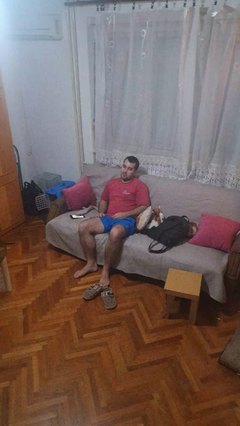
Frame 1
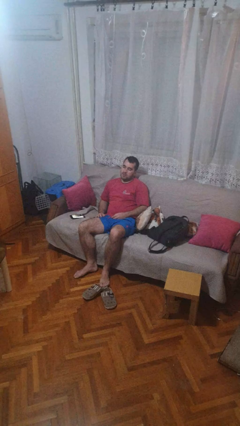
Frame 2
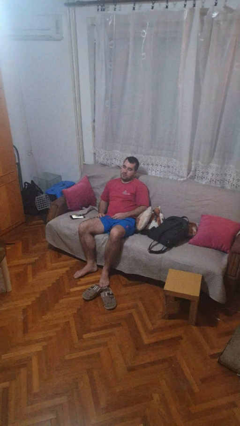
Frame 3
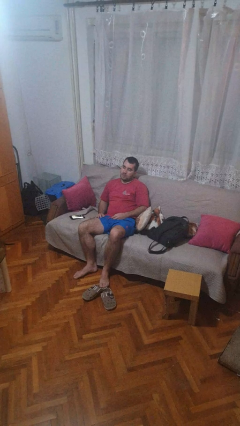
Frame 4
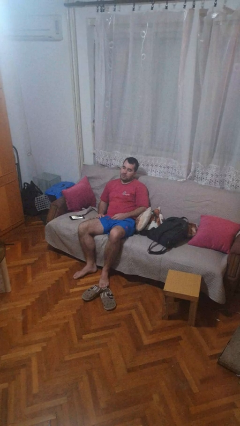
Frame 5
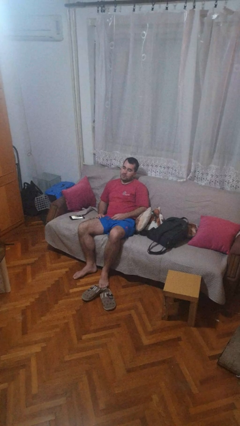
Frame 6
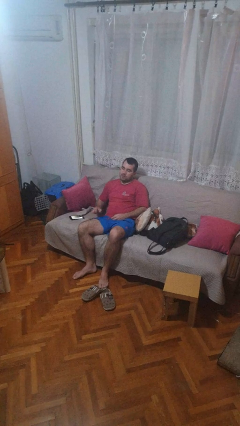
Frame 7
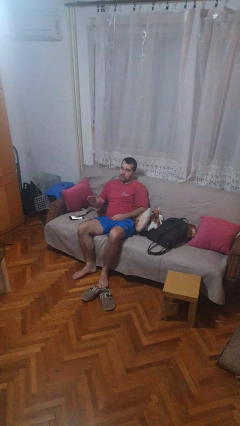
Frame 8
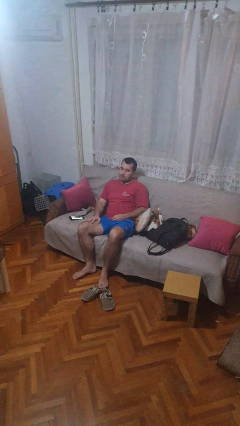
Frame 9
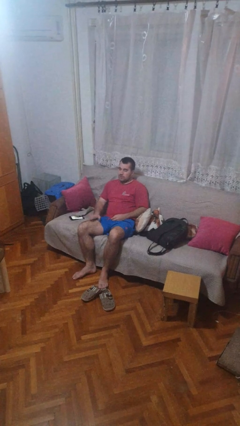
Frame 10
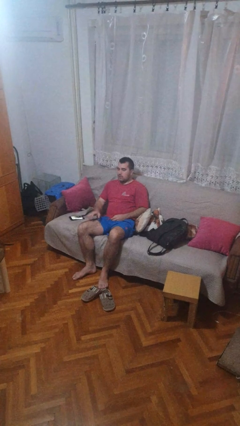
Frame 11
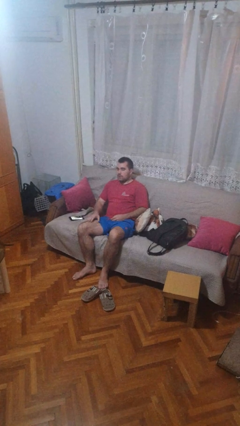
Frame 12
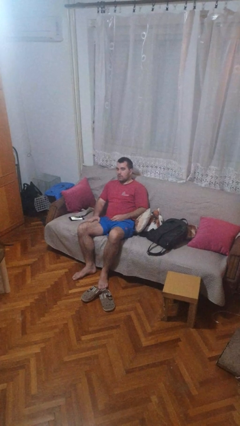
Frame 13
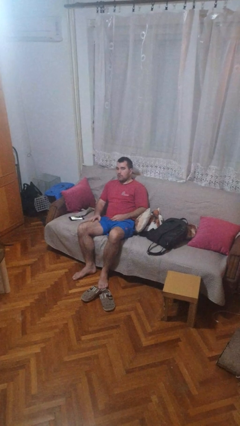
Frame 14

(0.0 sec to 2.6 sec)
person slaps hands on thighs

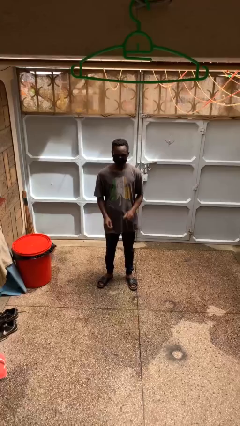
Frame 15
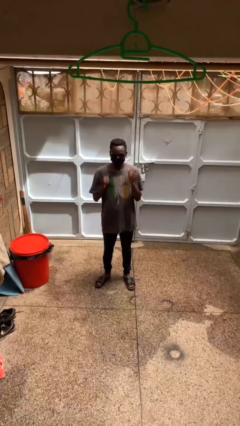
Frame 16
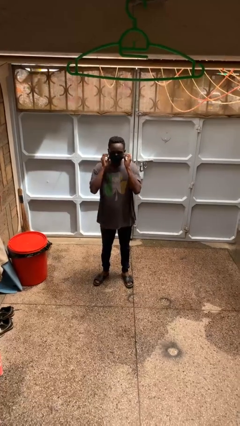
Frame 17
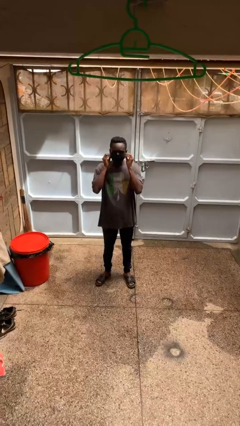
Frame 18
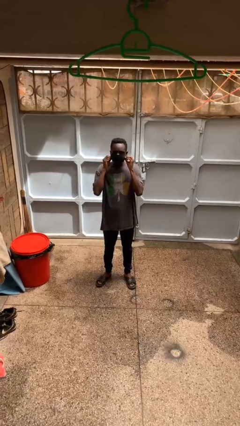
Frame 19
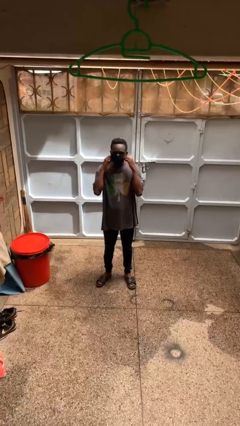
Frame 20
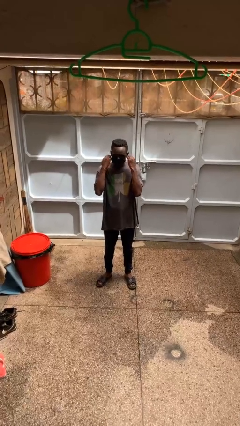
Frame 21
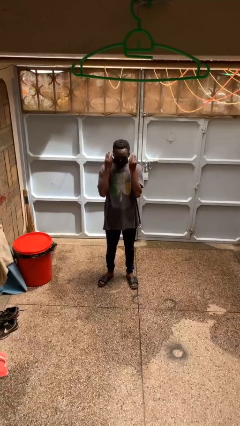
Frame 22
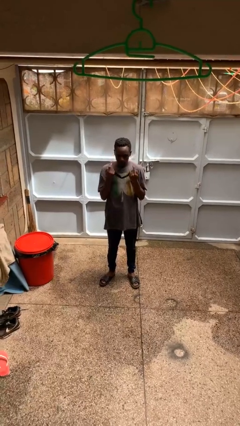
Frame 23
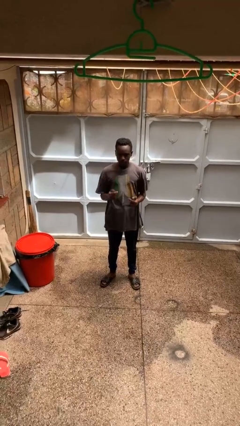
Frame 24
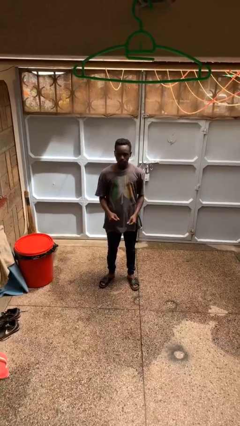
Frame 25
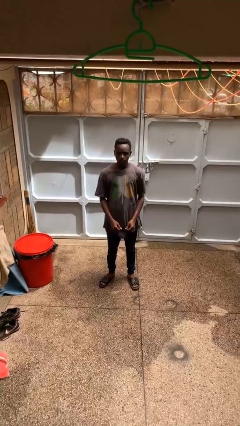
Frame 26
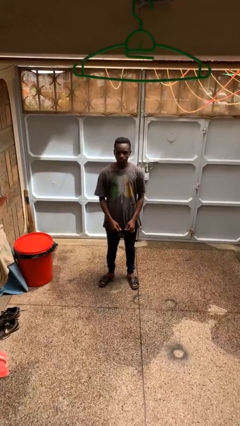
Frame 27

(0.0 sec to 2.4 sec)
person takes off facemask

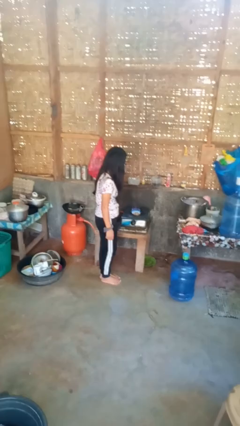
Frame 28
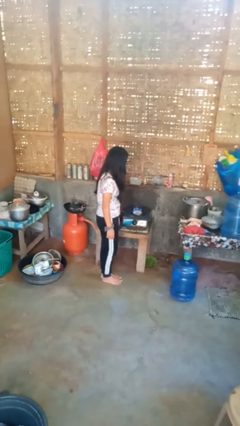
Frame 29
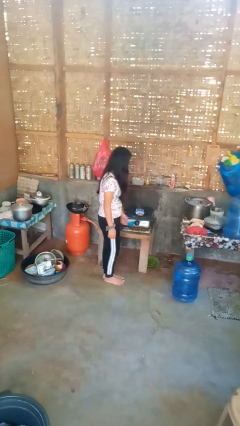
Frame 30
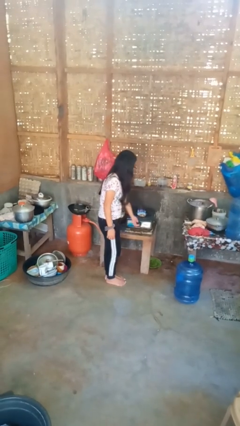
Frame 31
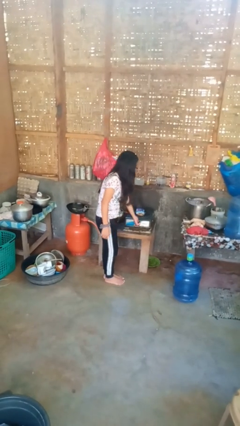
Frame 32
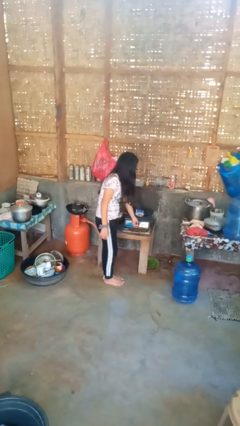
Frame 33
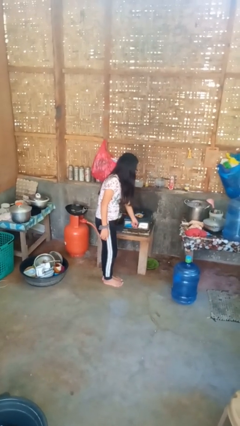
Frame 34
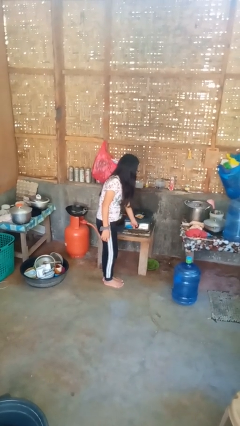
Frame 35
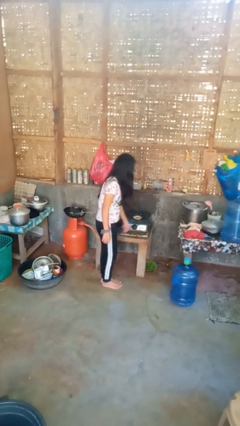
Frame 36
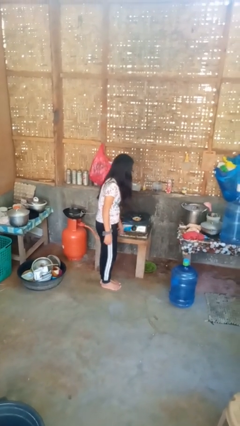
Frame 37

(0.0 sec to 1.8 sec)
person turns off stovetop

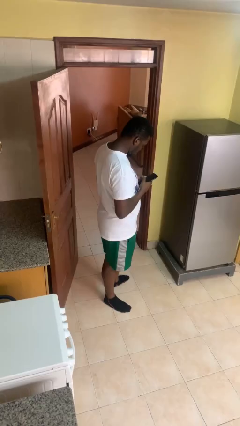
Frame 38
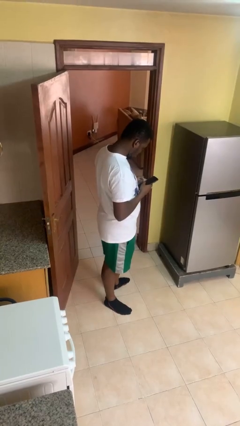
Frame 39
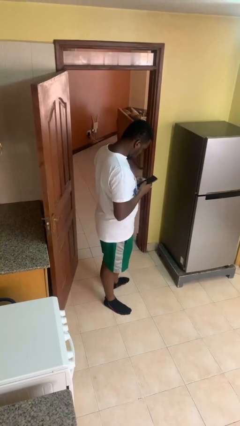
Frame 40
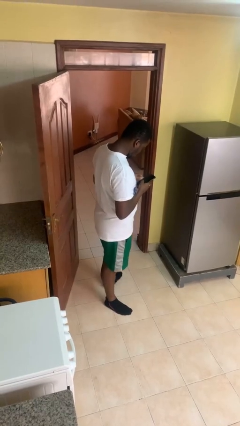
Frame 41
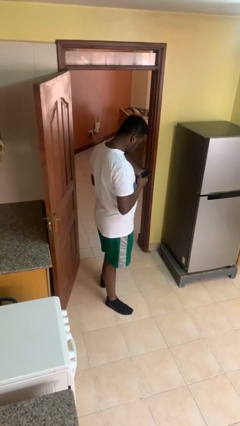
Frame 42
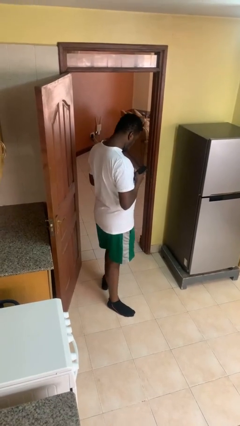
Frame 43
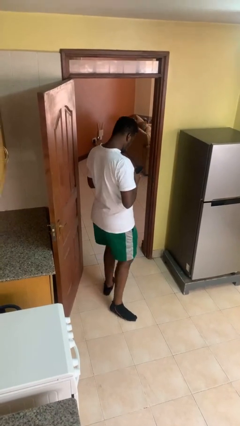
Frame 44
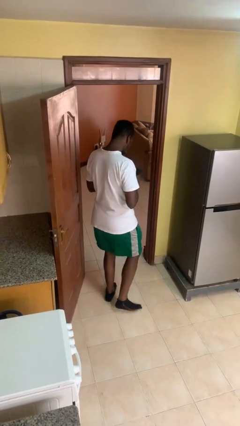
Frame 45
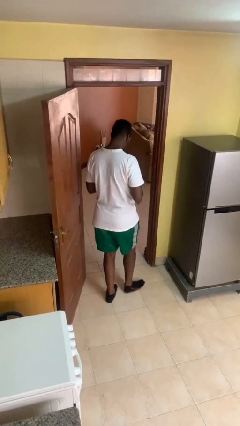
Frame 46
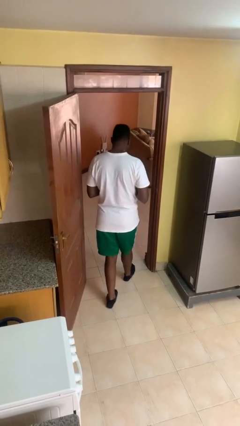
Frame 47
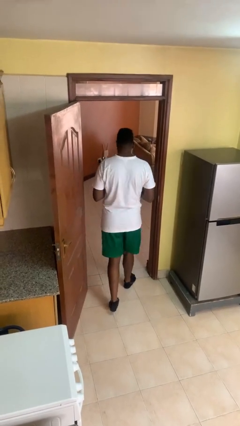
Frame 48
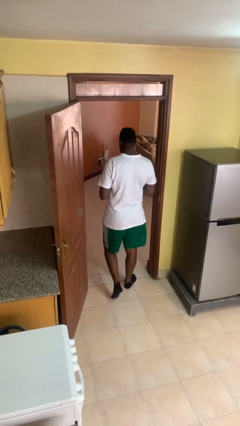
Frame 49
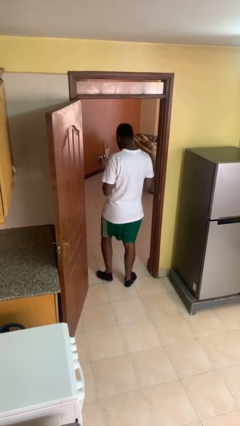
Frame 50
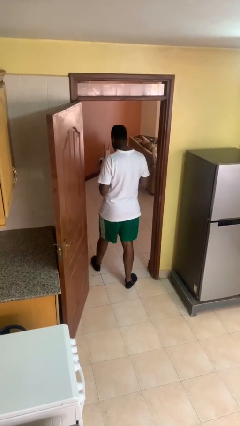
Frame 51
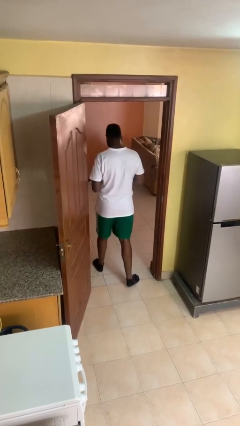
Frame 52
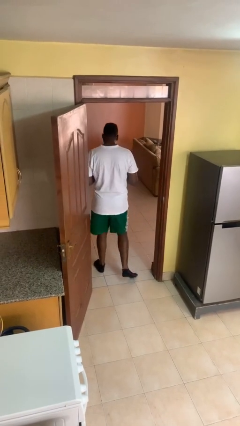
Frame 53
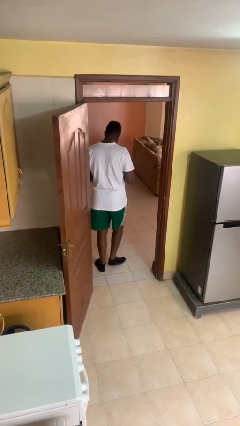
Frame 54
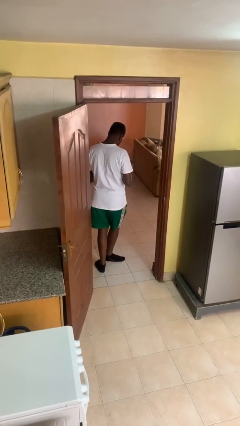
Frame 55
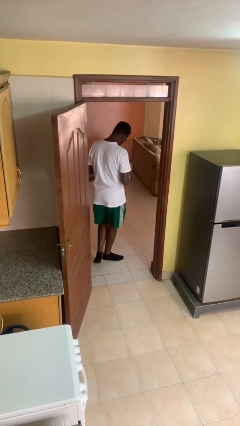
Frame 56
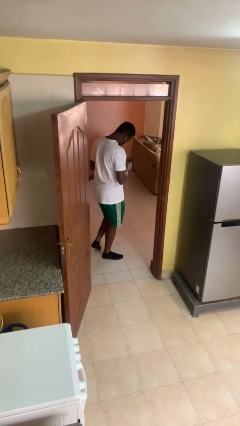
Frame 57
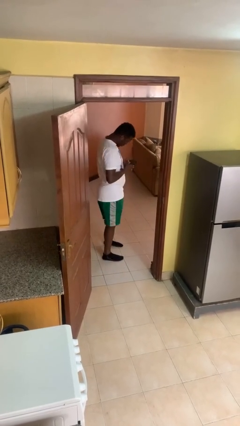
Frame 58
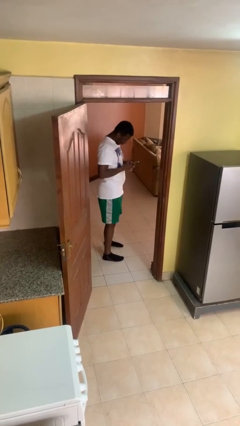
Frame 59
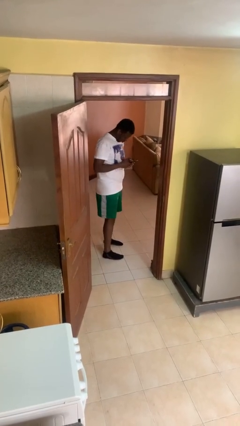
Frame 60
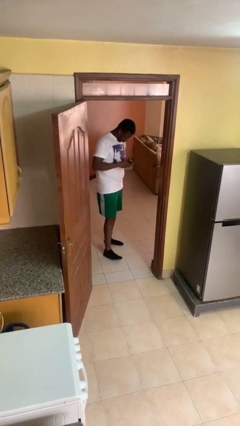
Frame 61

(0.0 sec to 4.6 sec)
person exits scene through structure

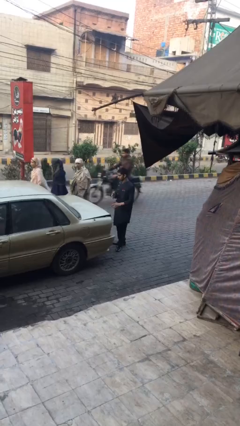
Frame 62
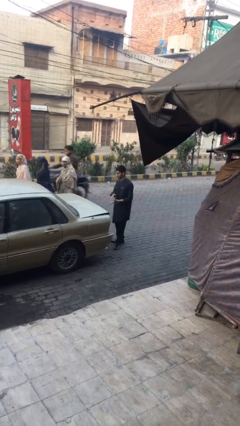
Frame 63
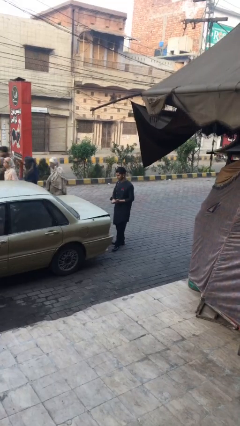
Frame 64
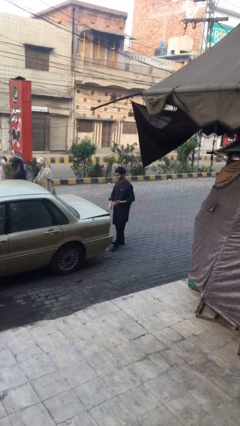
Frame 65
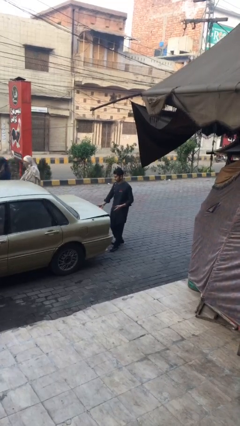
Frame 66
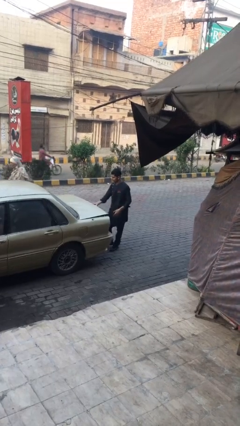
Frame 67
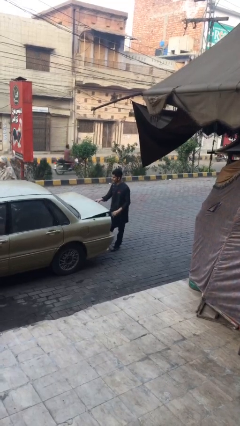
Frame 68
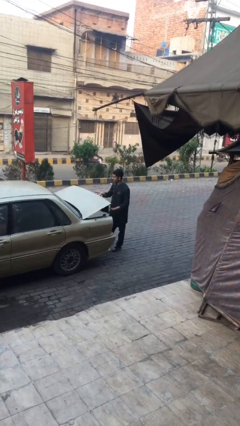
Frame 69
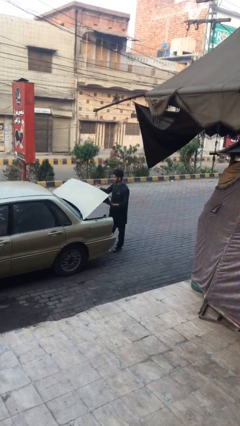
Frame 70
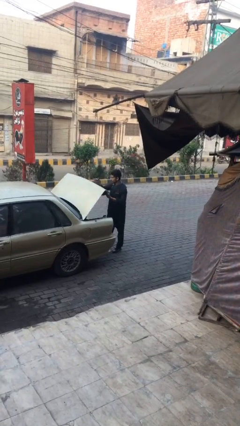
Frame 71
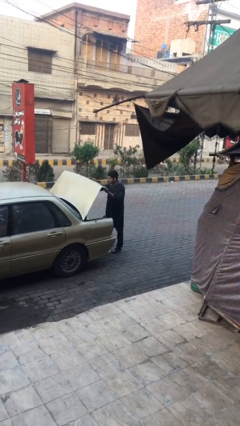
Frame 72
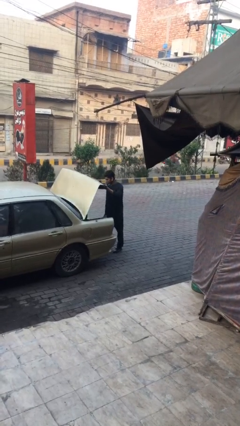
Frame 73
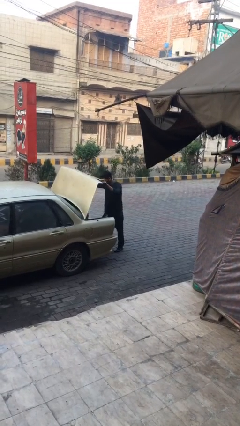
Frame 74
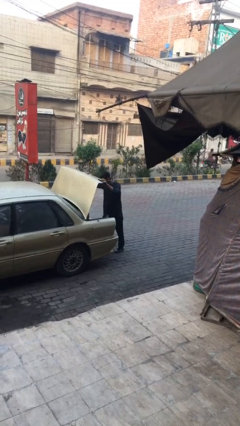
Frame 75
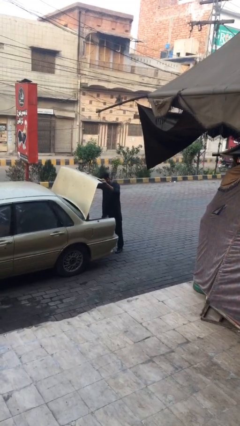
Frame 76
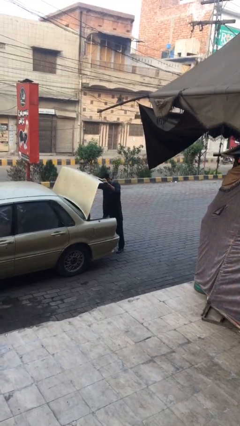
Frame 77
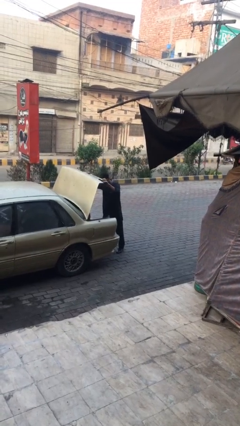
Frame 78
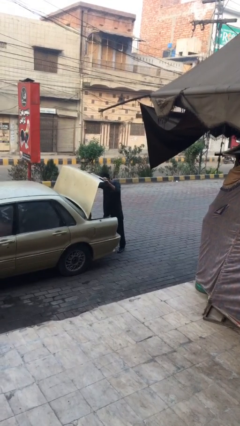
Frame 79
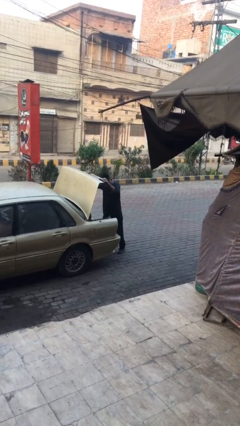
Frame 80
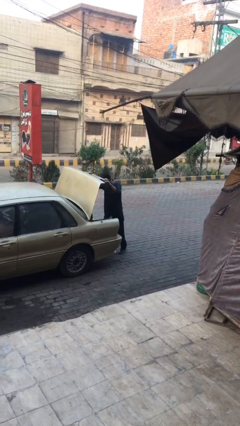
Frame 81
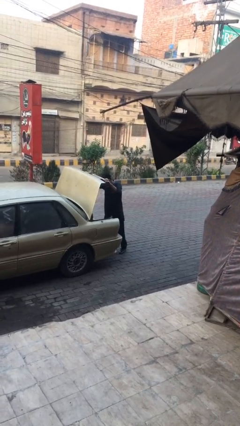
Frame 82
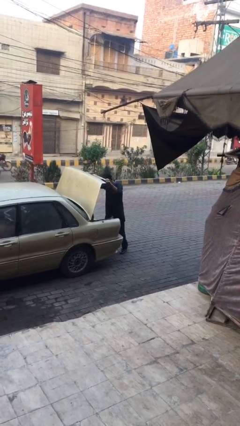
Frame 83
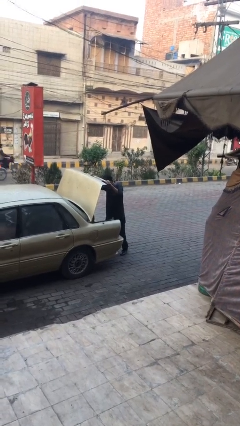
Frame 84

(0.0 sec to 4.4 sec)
person opens car trunk

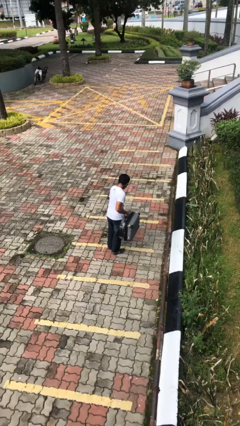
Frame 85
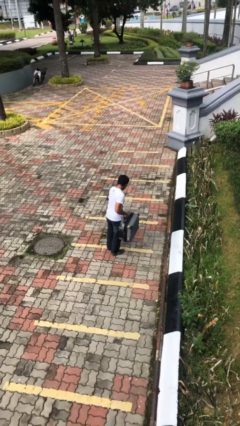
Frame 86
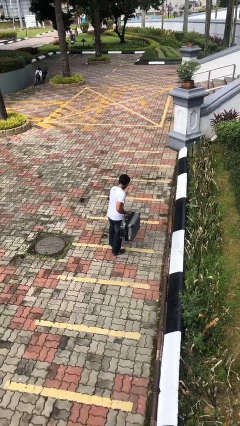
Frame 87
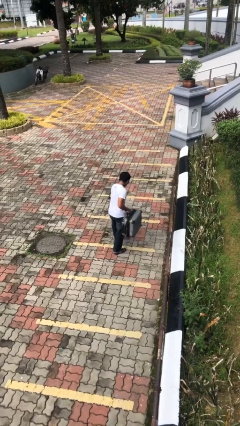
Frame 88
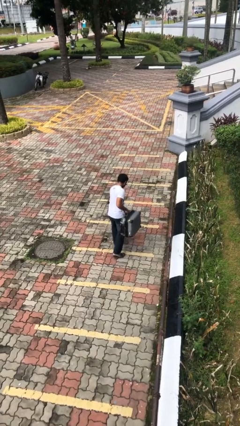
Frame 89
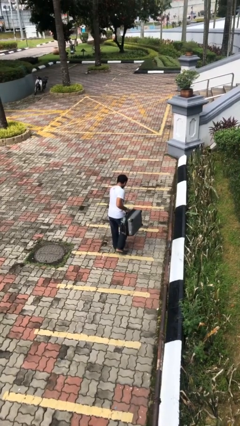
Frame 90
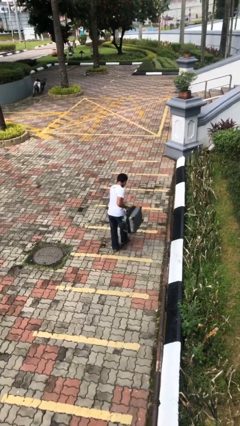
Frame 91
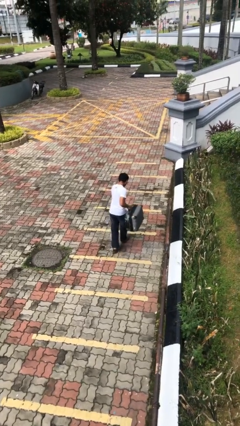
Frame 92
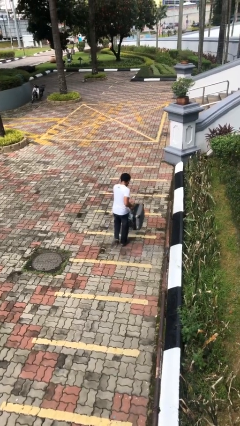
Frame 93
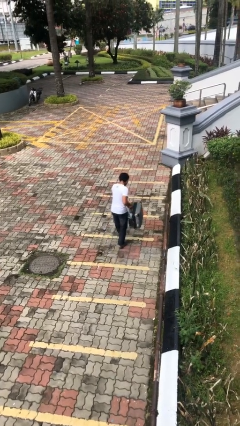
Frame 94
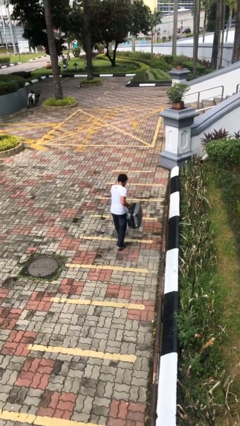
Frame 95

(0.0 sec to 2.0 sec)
person carries heavy object
